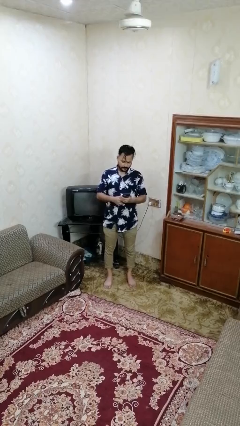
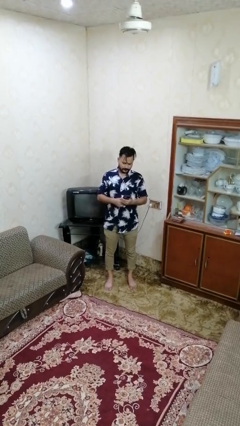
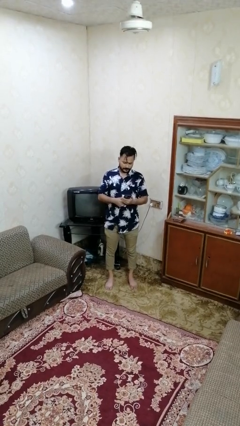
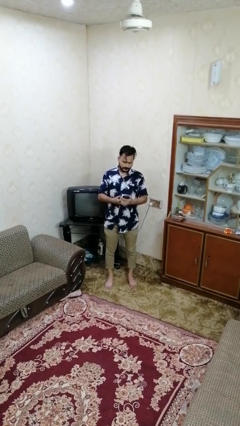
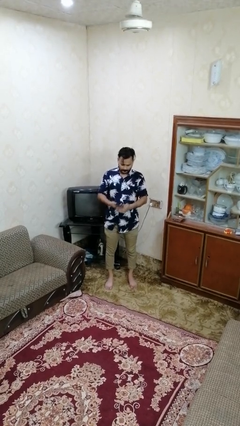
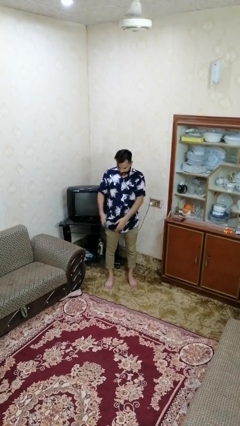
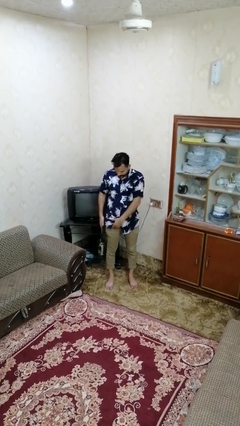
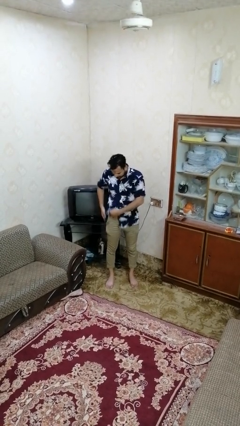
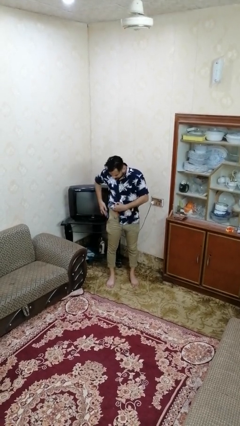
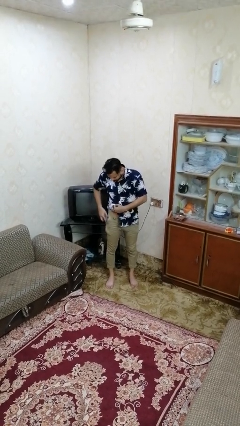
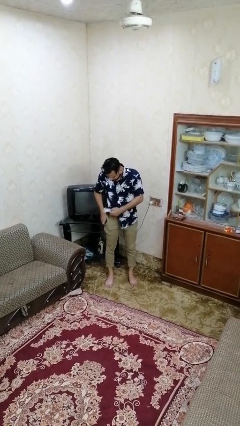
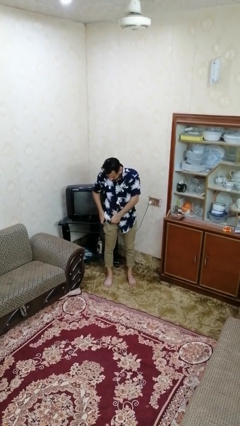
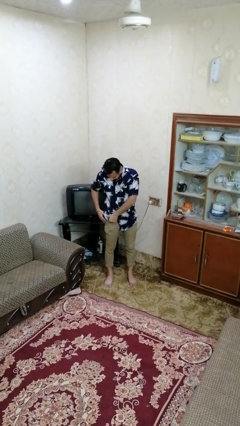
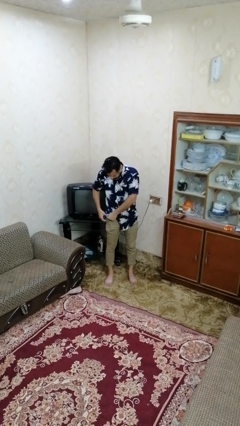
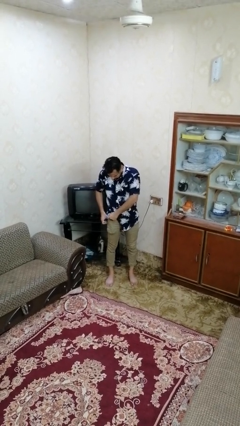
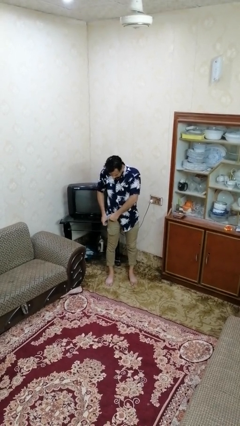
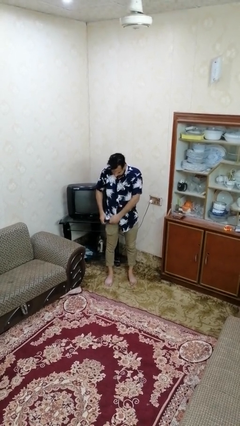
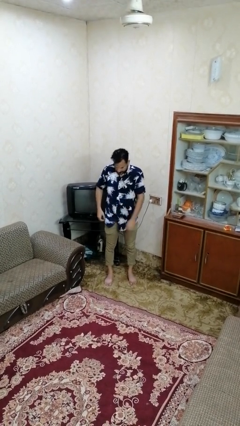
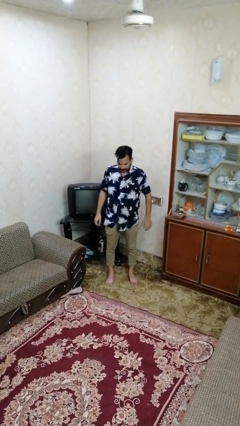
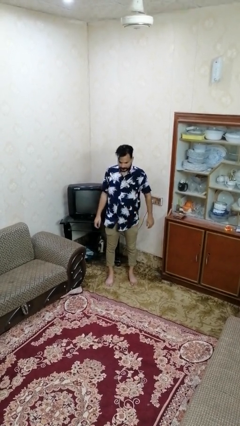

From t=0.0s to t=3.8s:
person puts phone into pocket

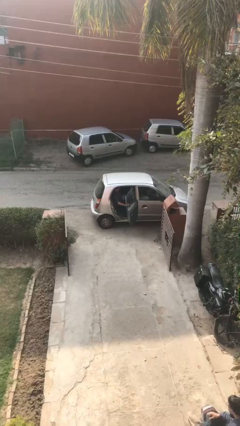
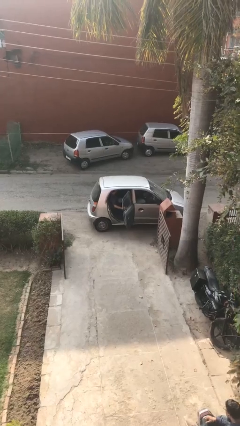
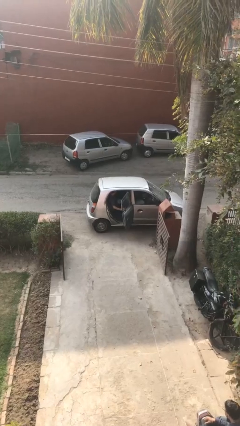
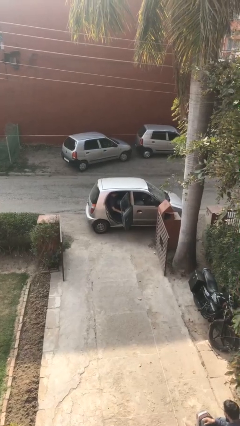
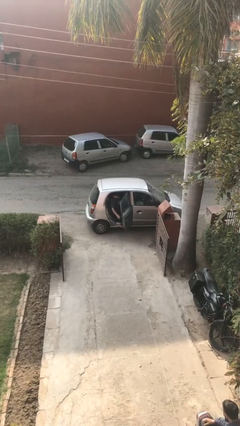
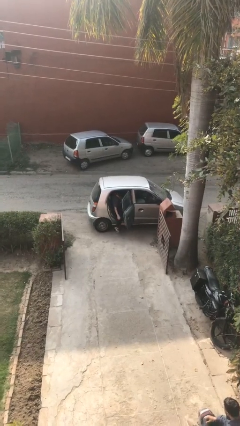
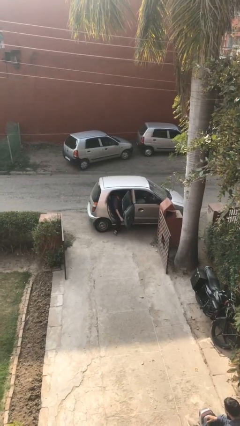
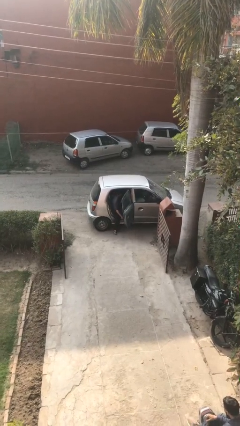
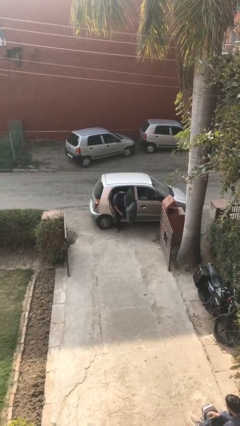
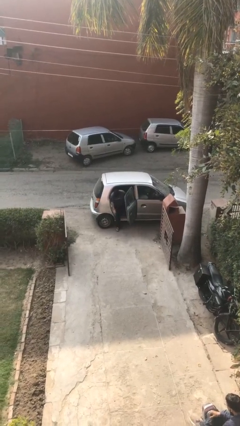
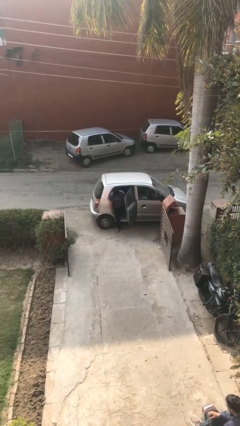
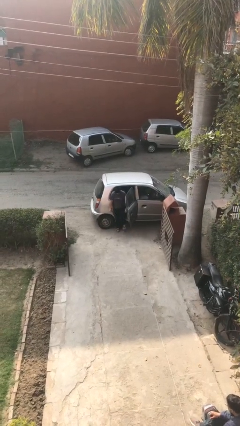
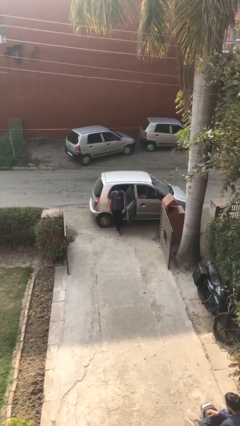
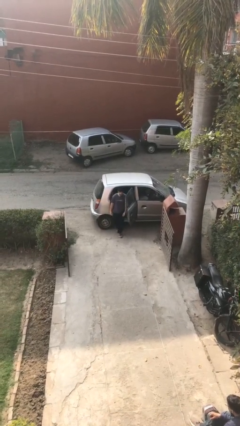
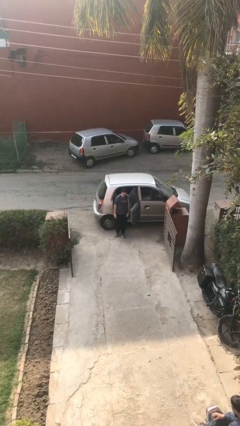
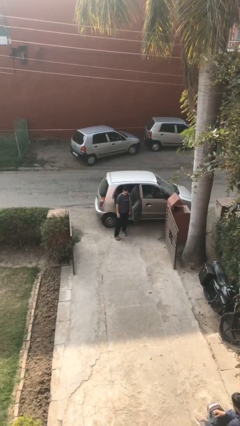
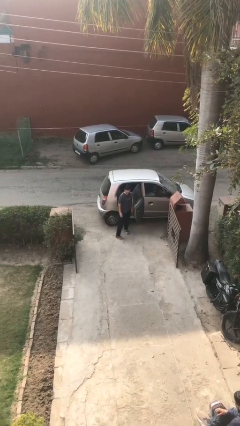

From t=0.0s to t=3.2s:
person exits car

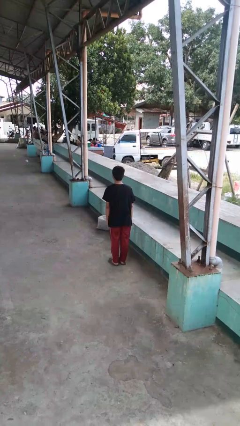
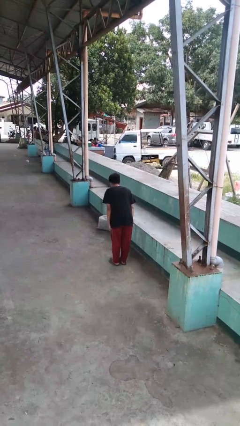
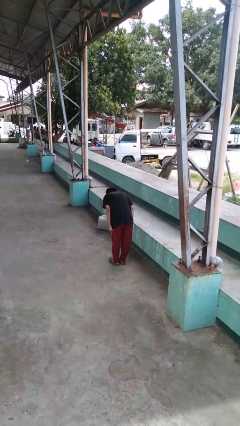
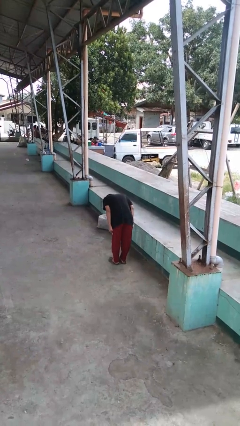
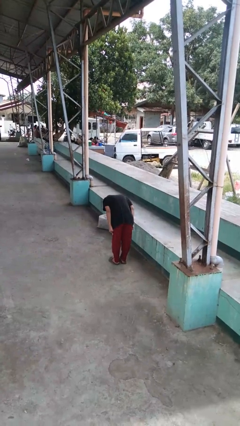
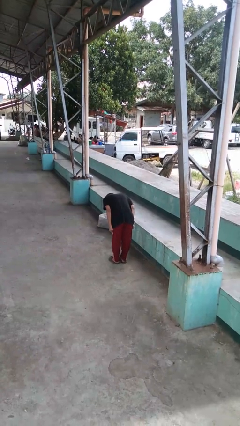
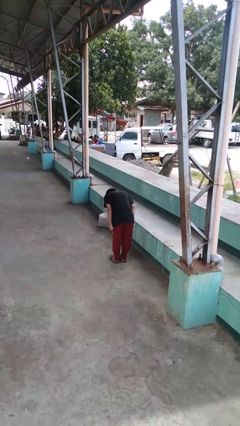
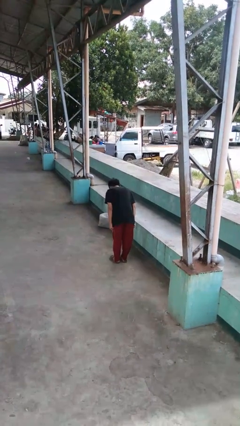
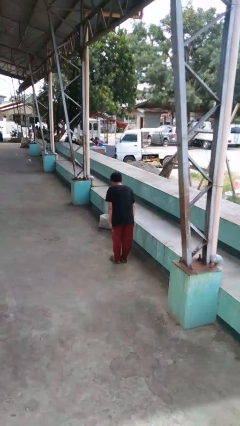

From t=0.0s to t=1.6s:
person bows

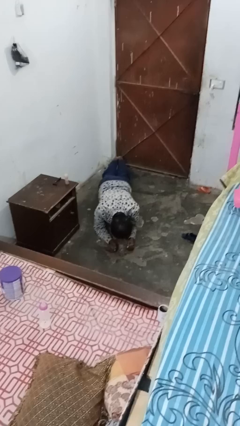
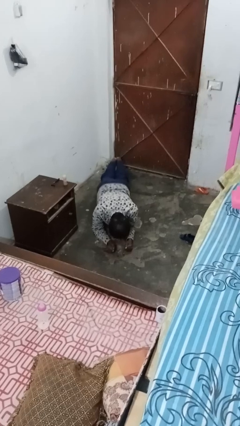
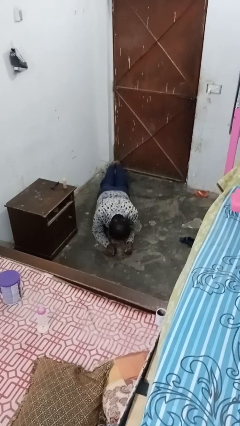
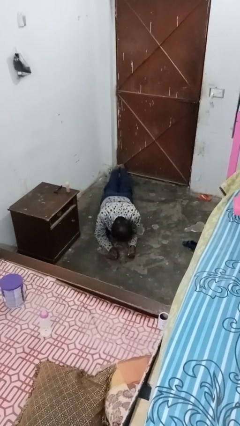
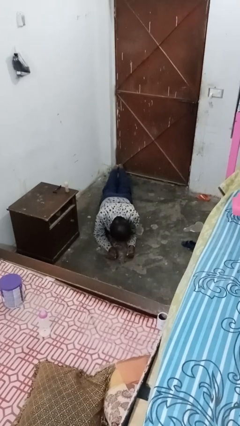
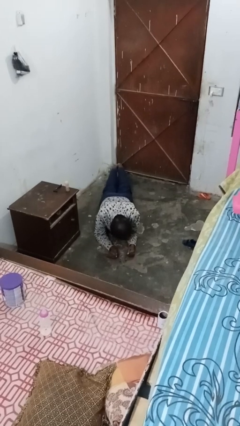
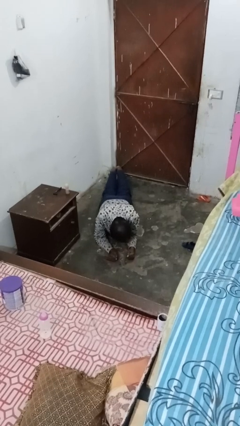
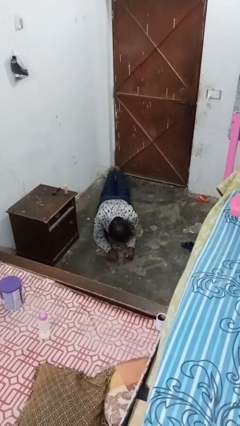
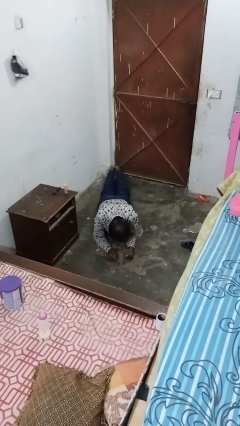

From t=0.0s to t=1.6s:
person stands up from floor

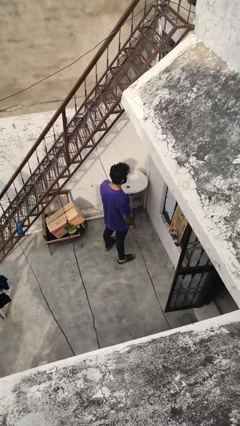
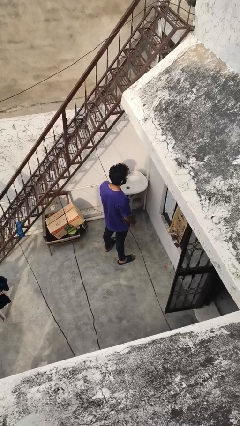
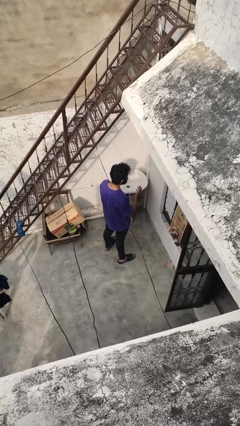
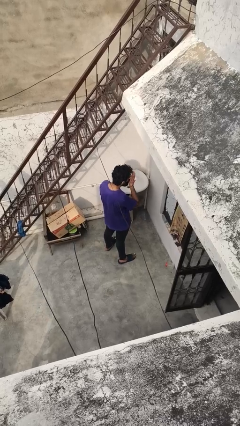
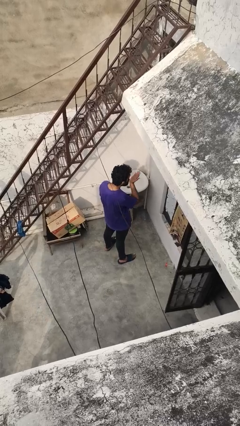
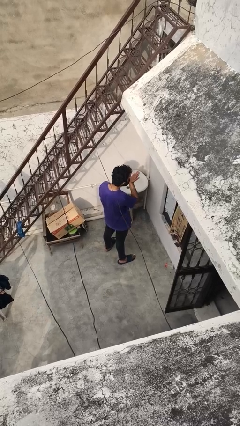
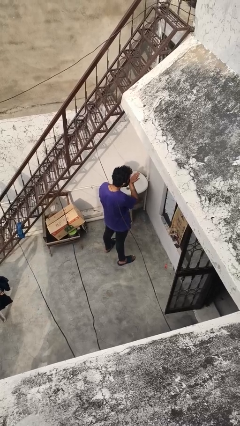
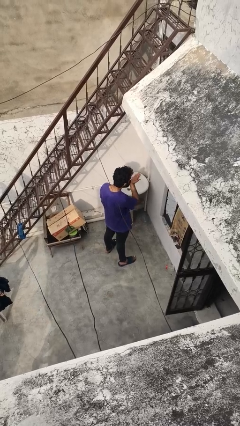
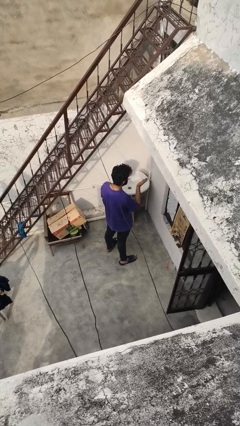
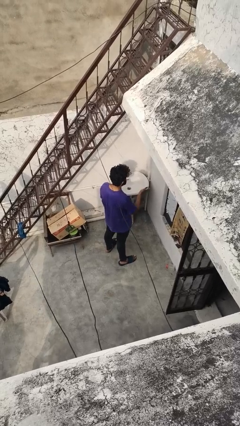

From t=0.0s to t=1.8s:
person gestures blow kiss

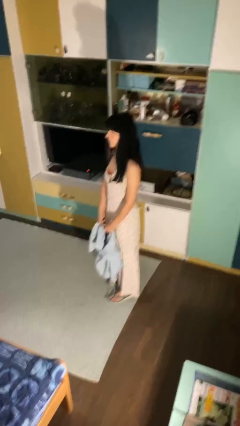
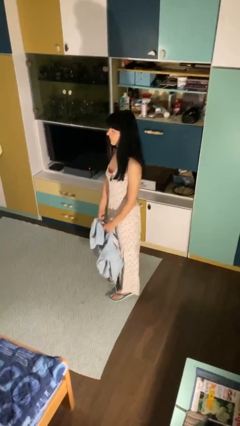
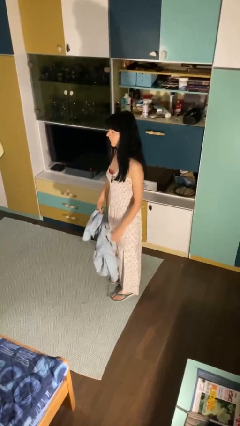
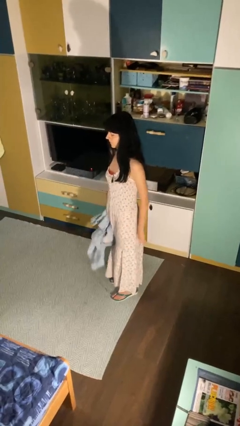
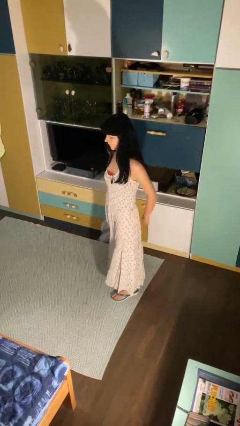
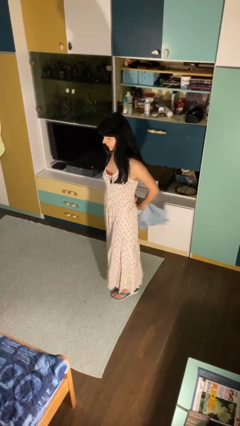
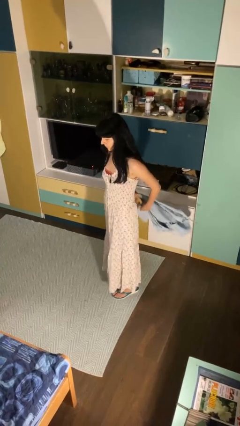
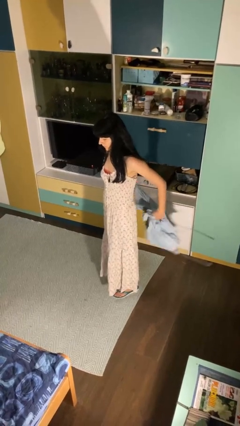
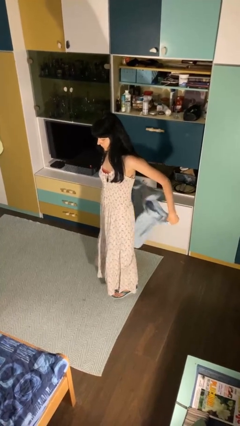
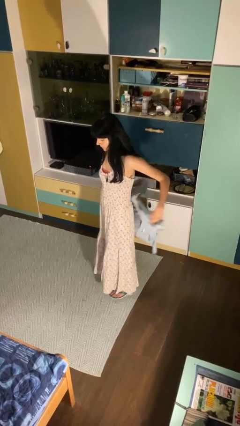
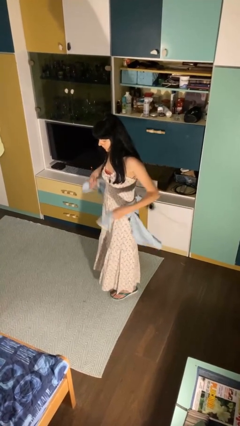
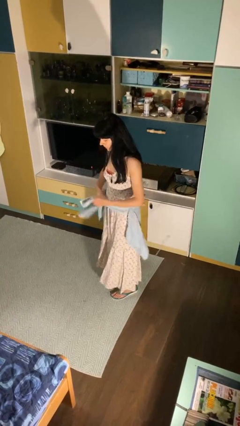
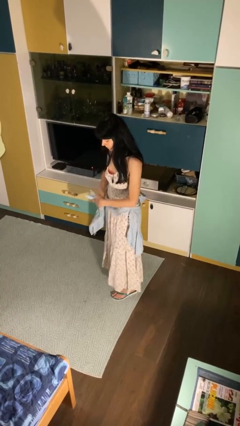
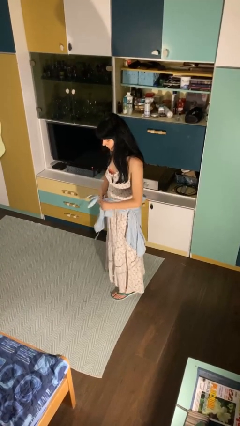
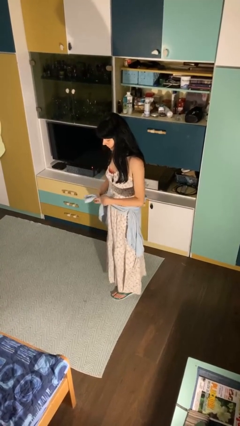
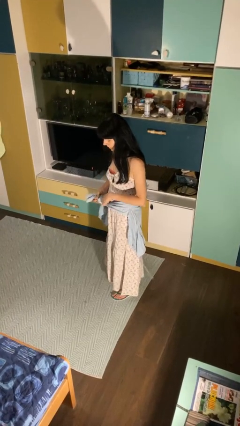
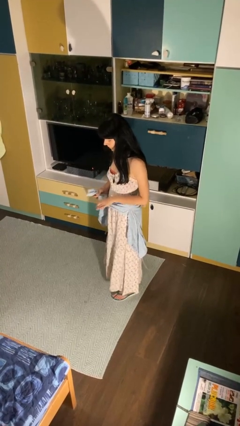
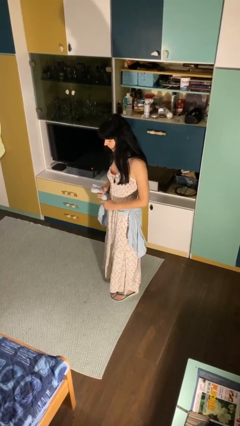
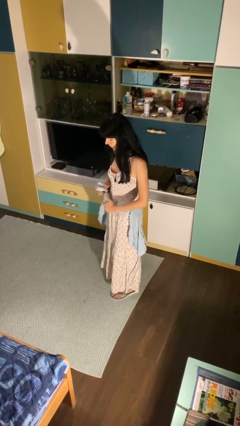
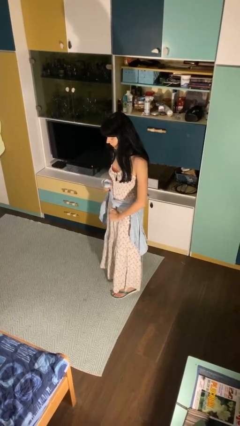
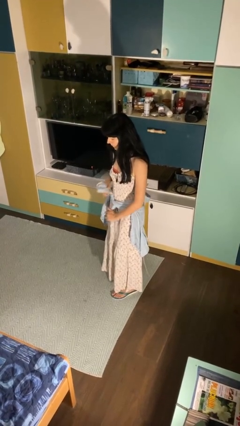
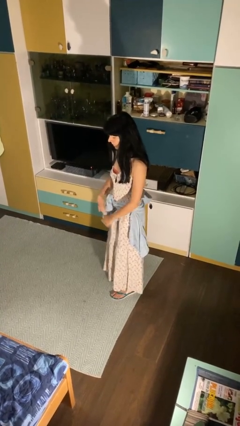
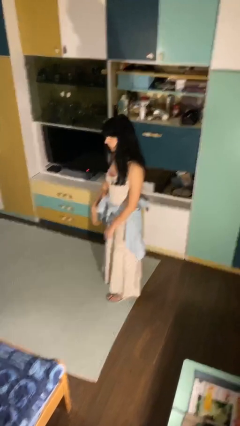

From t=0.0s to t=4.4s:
person ties jacket around waist

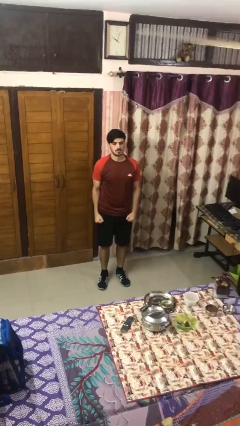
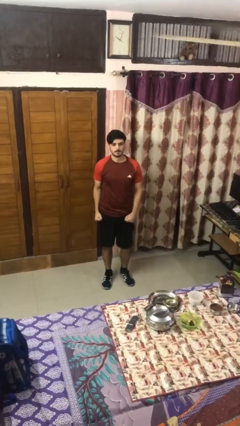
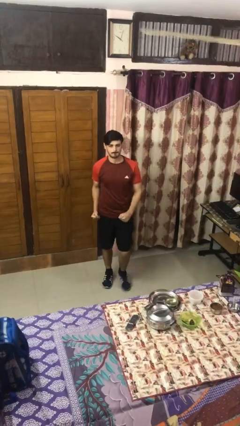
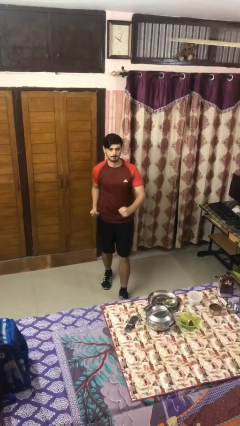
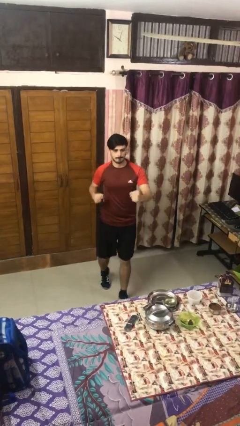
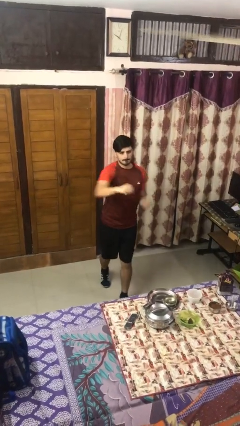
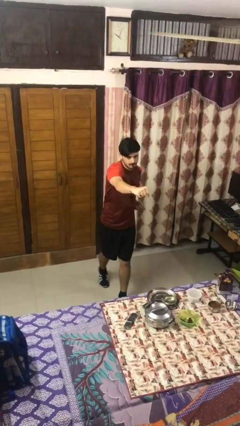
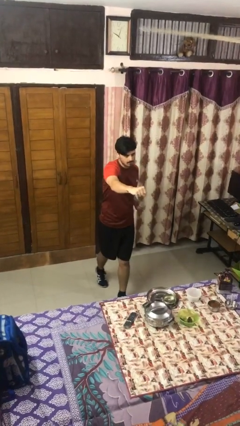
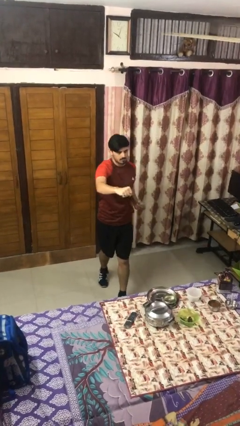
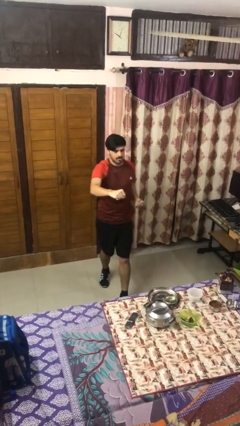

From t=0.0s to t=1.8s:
person punches
